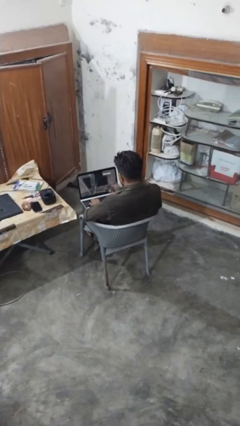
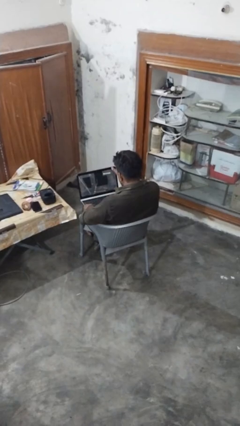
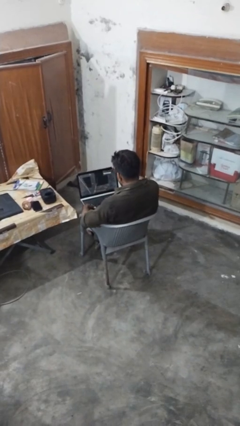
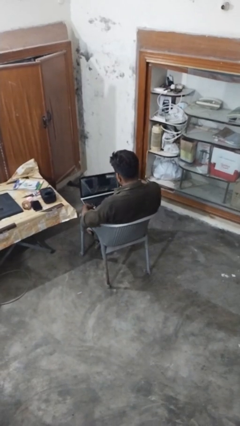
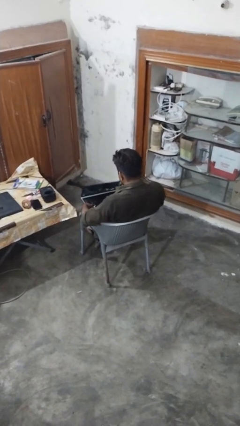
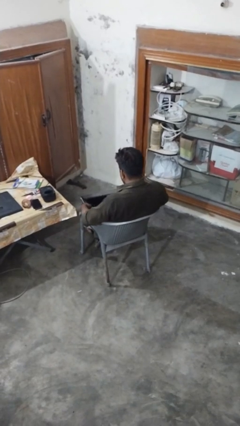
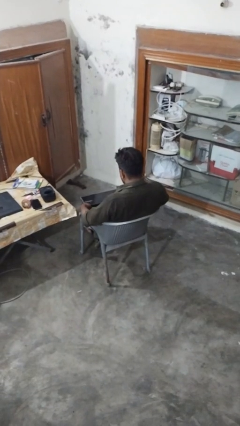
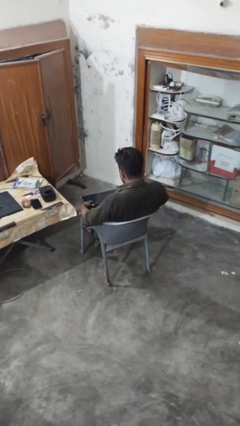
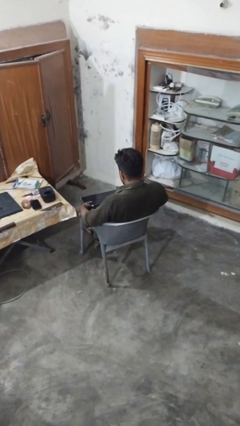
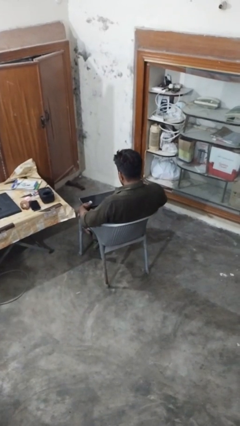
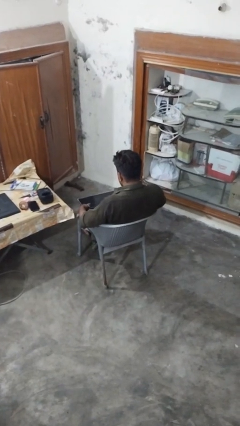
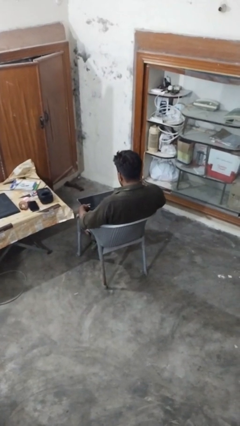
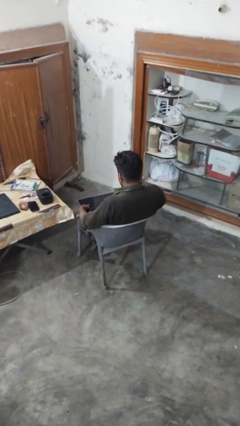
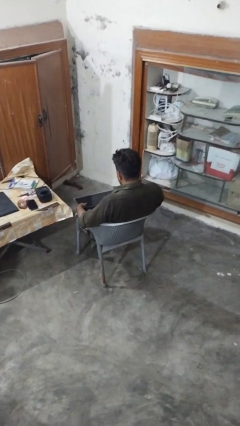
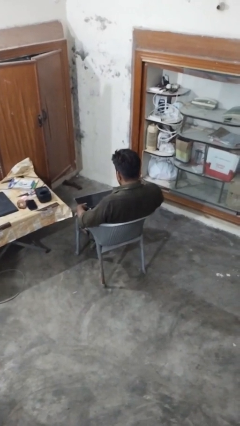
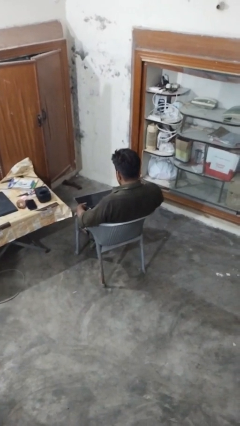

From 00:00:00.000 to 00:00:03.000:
person closes laptop

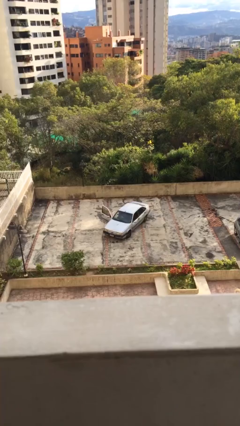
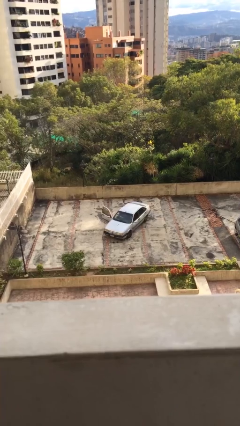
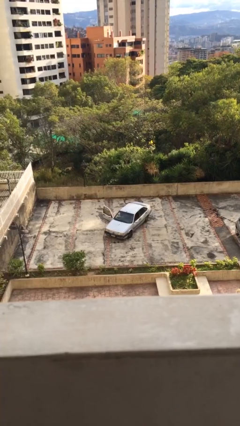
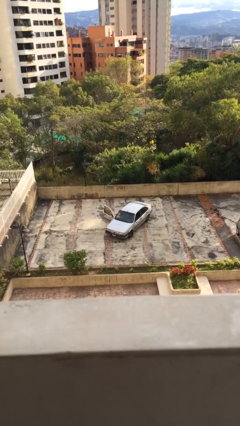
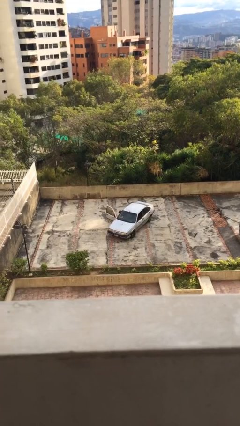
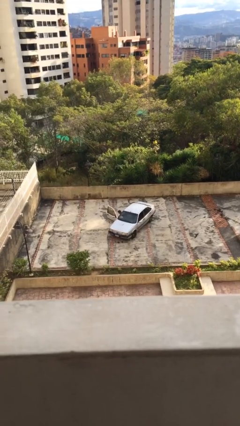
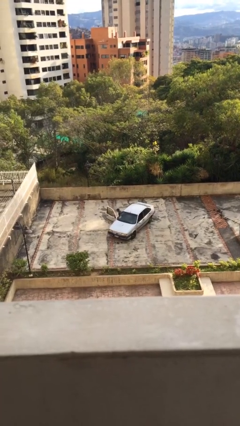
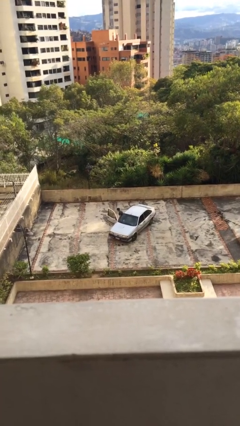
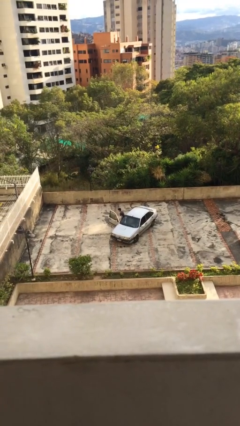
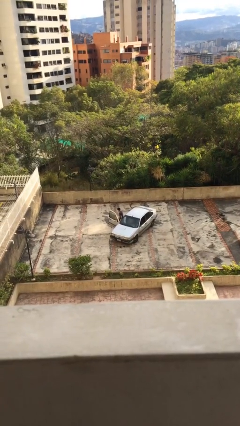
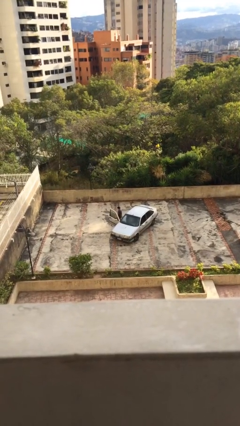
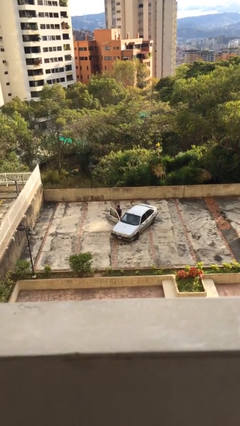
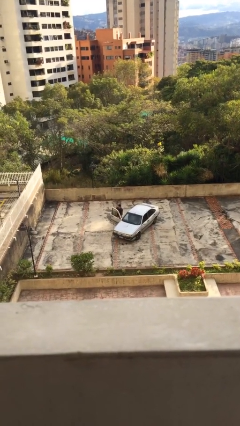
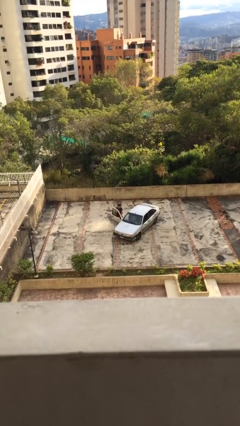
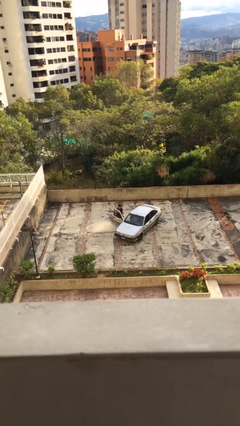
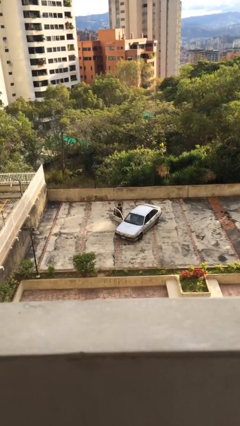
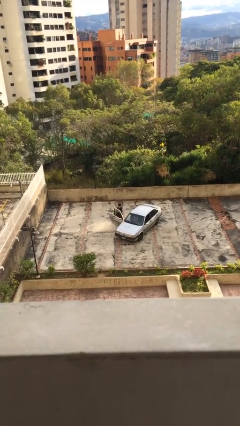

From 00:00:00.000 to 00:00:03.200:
person exits car

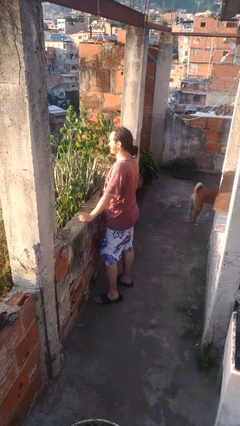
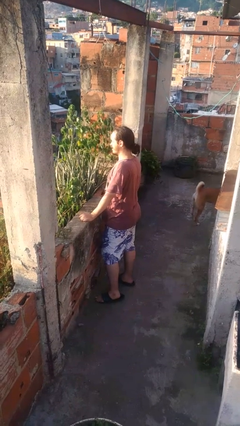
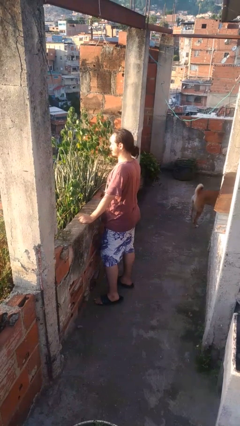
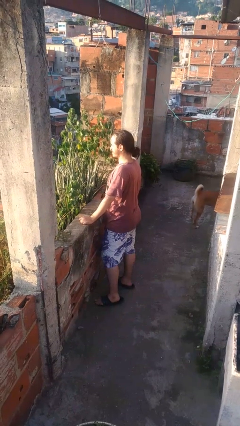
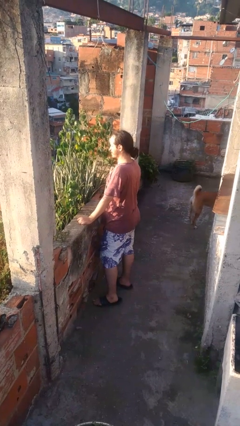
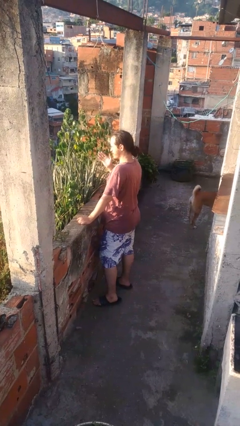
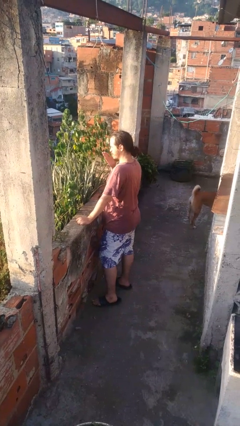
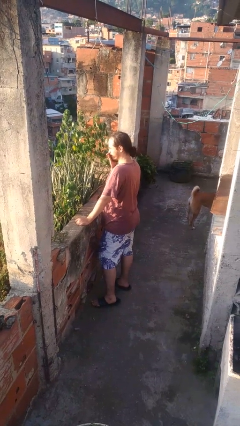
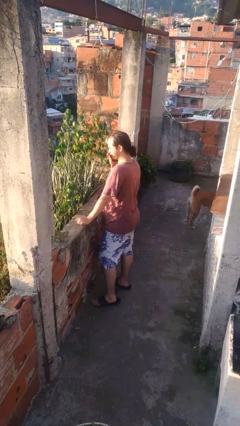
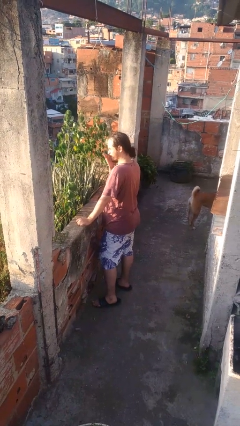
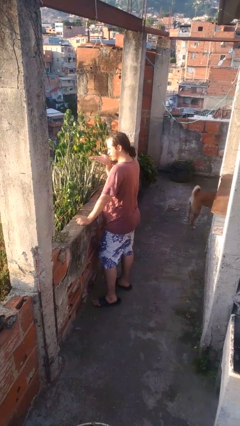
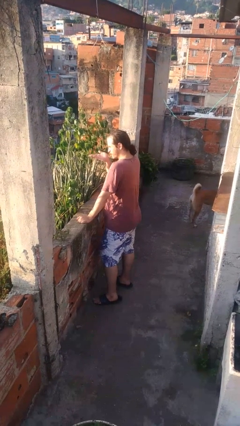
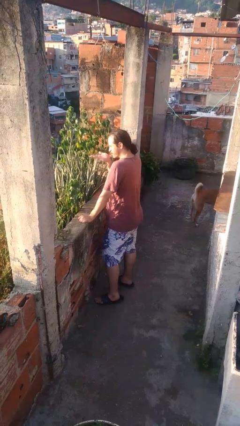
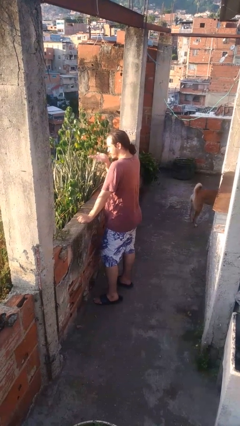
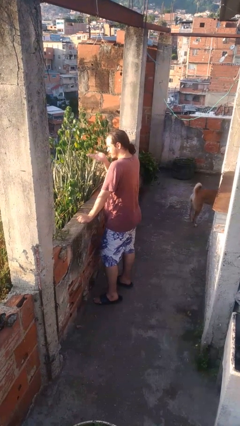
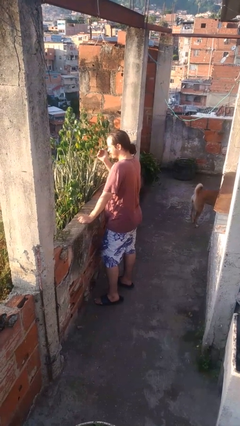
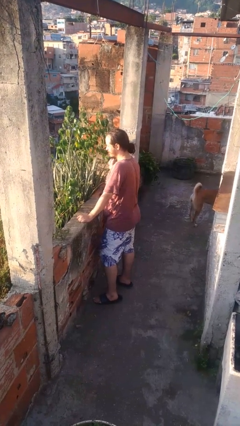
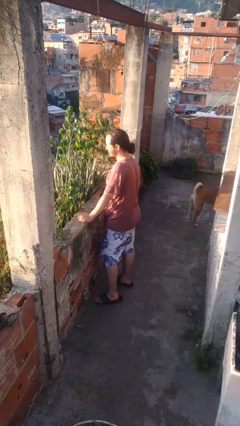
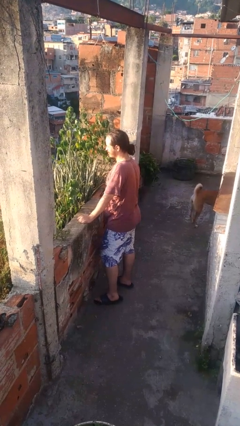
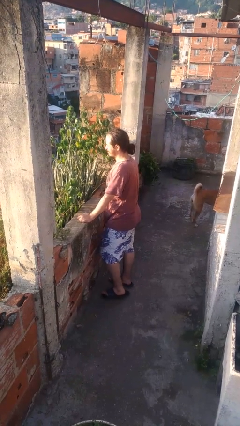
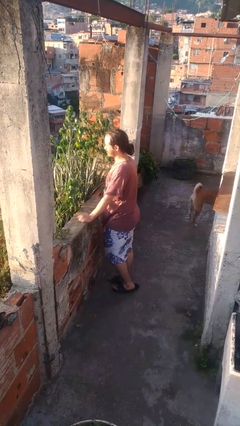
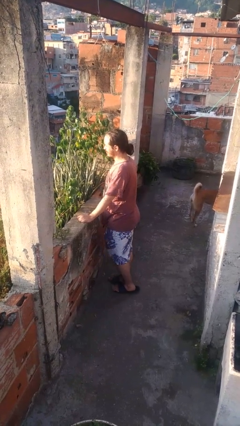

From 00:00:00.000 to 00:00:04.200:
person gestures blow kiss

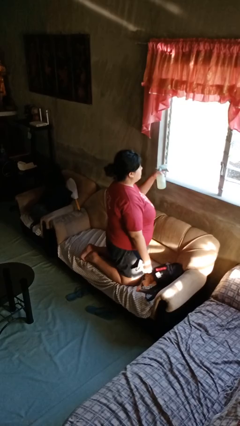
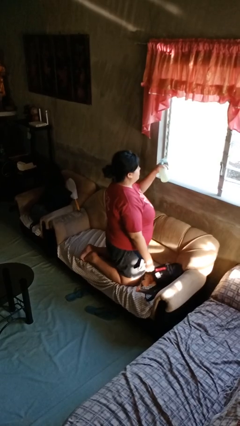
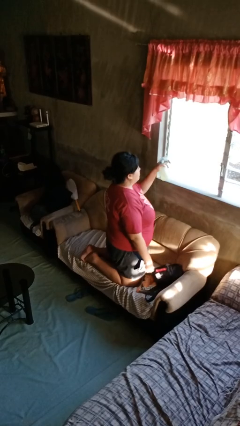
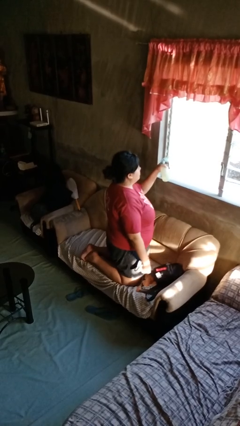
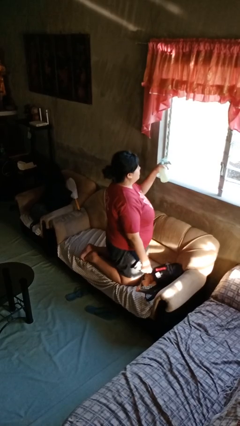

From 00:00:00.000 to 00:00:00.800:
person sprays from bottle

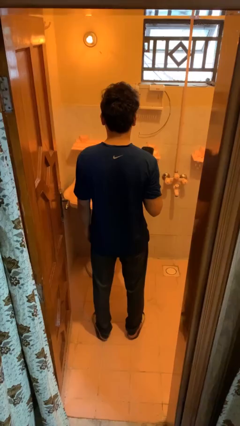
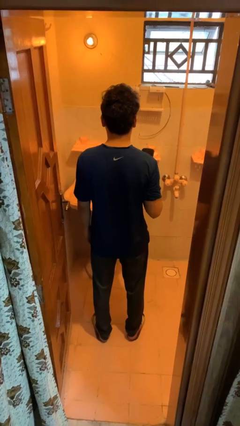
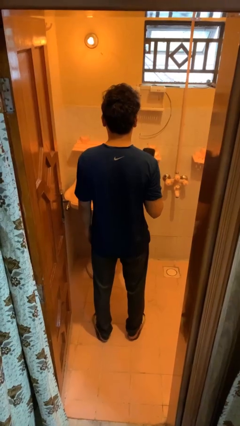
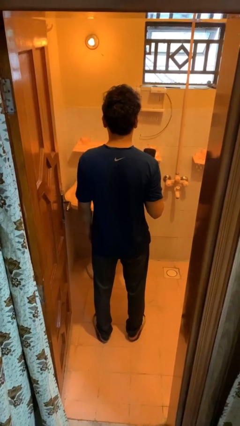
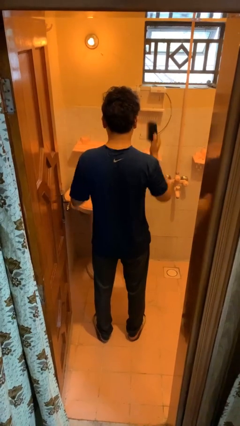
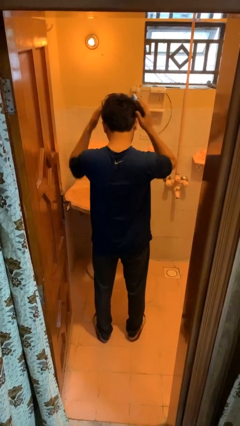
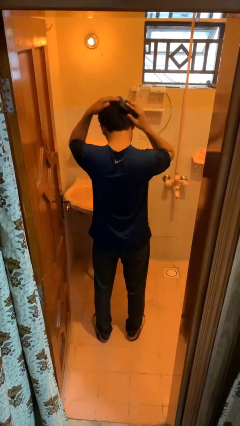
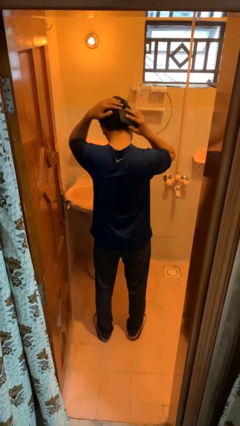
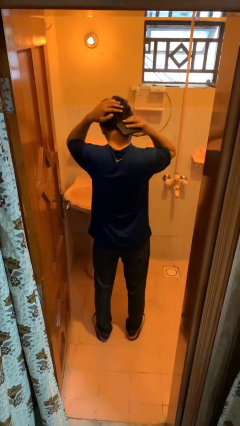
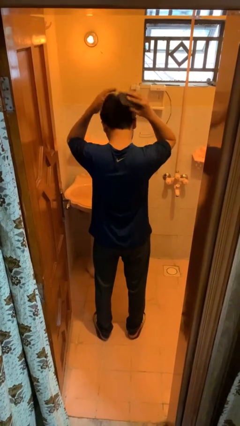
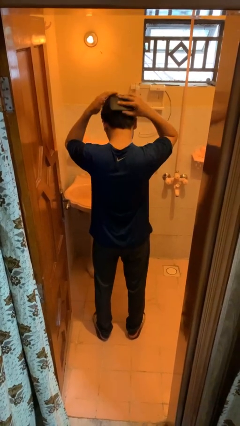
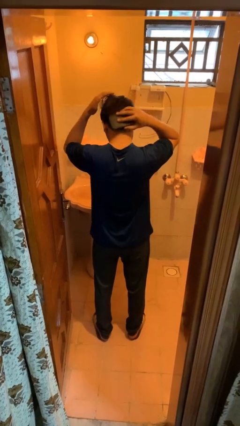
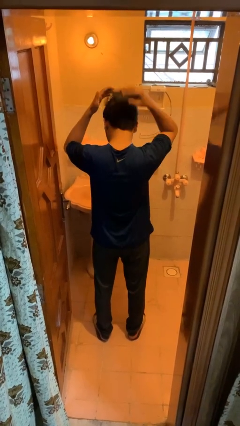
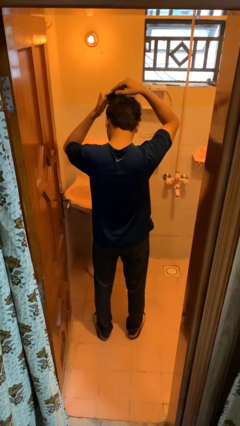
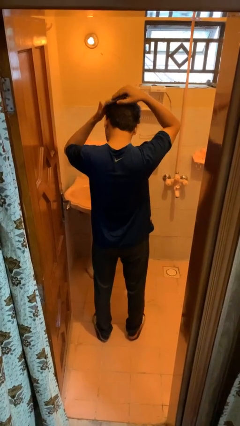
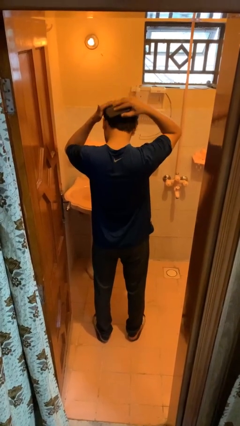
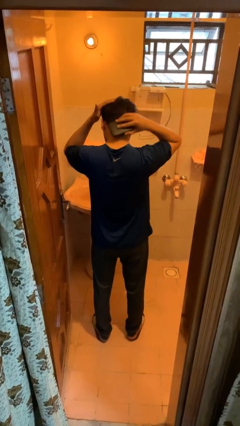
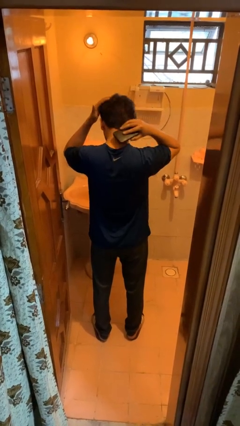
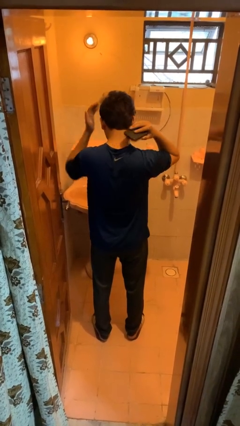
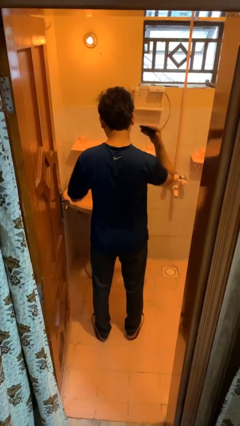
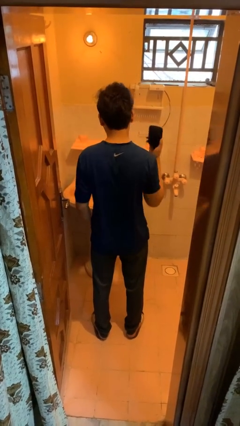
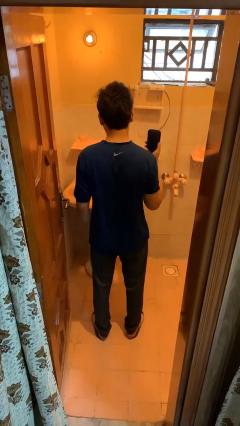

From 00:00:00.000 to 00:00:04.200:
person brushes hair

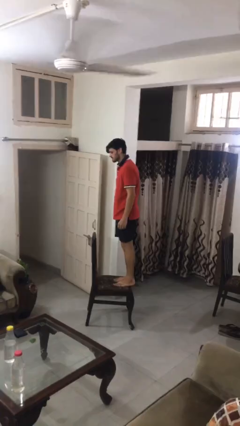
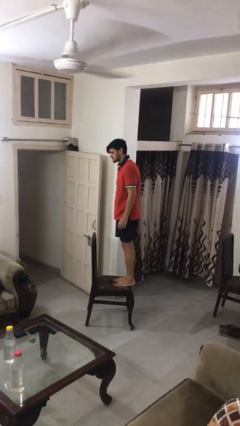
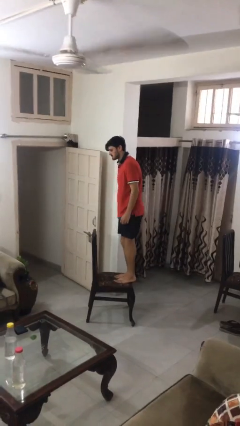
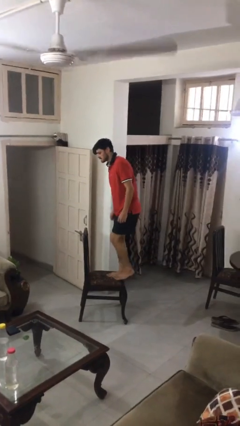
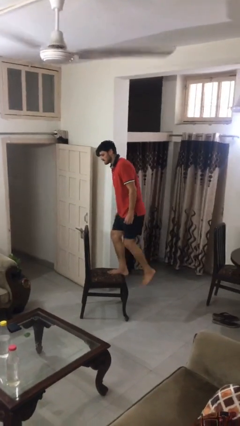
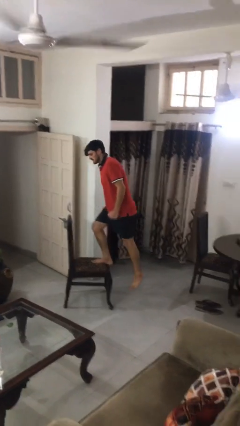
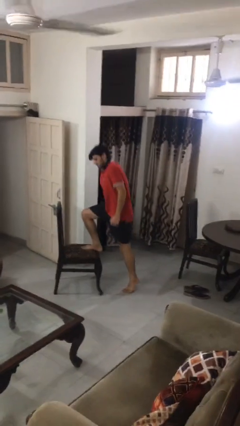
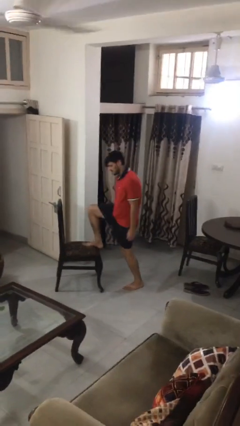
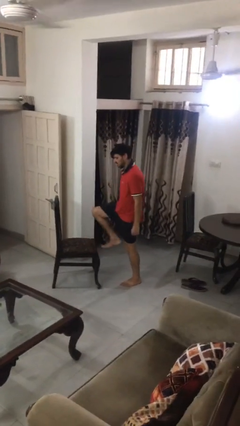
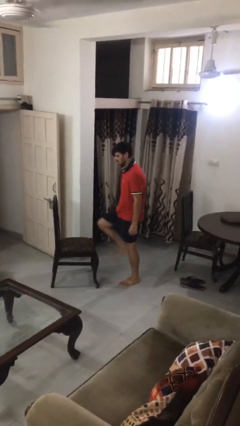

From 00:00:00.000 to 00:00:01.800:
person climbs off chair
